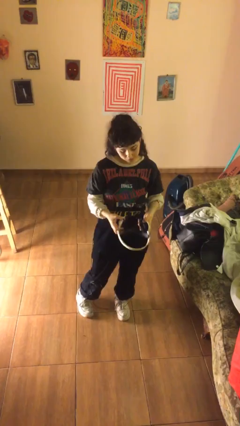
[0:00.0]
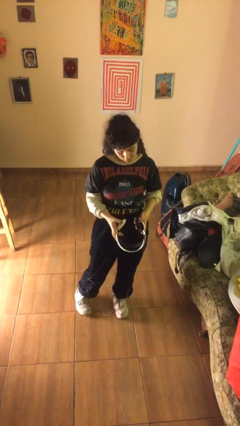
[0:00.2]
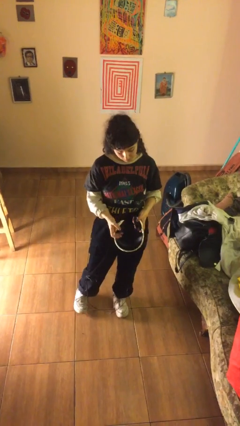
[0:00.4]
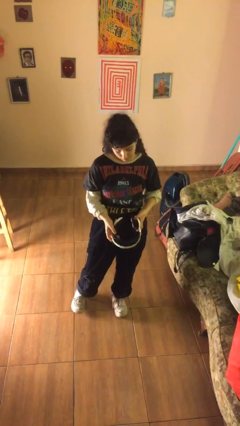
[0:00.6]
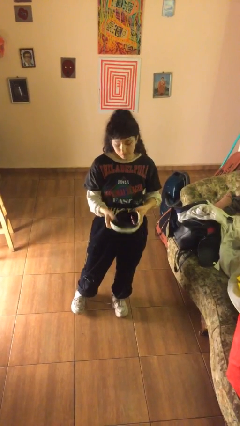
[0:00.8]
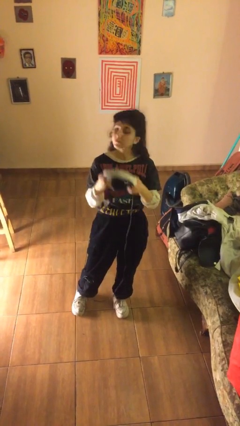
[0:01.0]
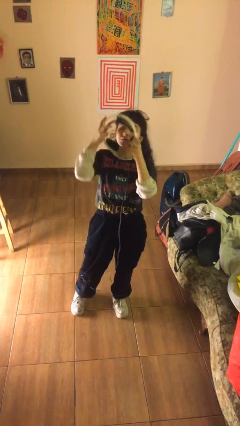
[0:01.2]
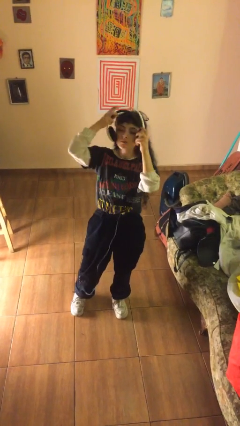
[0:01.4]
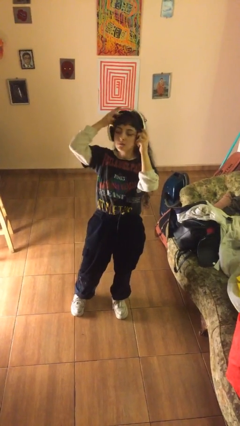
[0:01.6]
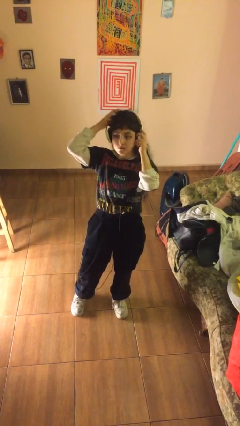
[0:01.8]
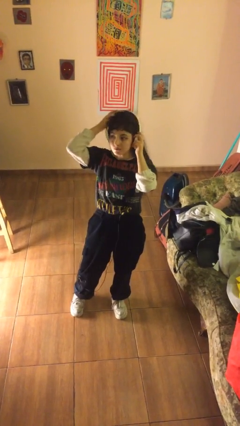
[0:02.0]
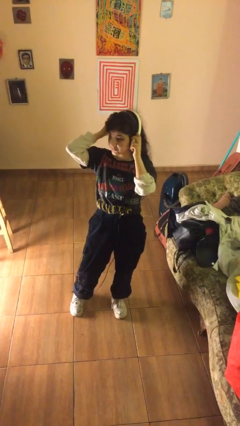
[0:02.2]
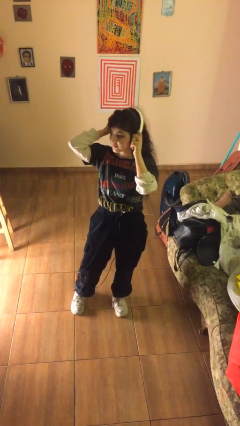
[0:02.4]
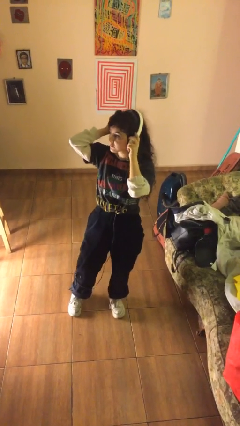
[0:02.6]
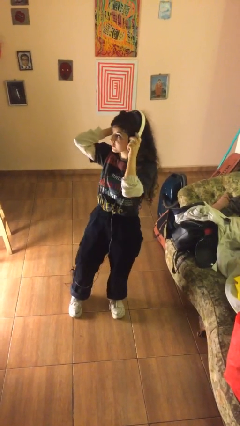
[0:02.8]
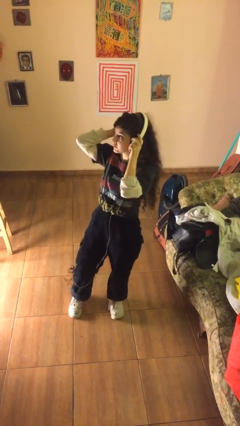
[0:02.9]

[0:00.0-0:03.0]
person puts on headphones

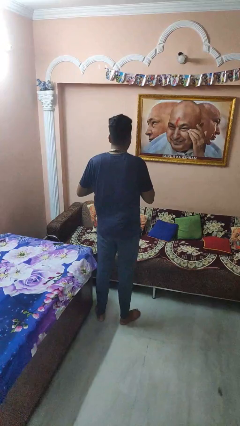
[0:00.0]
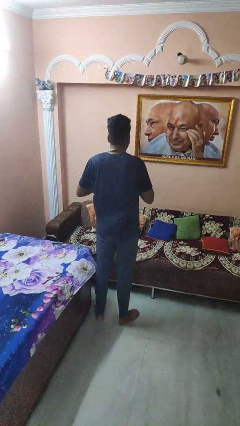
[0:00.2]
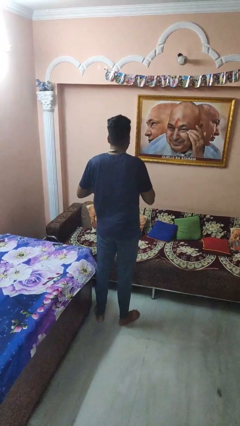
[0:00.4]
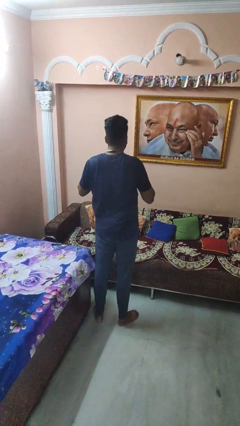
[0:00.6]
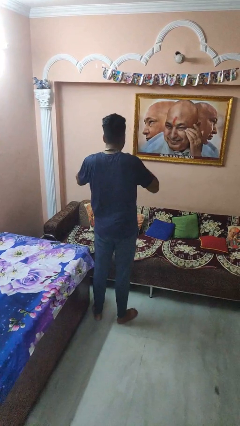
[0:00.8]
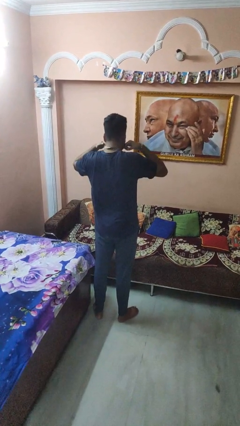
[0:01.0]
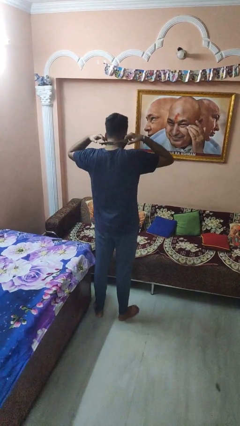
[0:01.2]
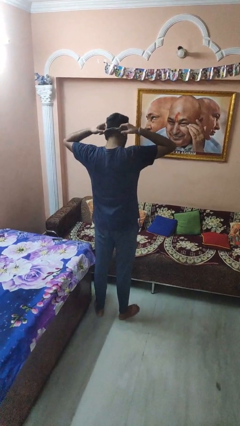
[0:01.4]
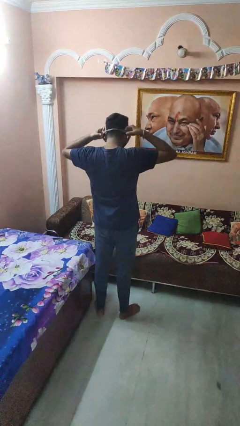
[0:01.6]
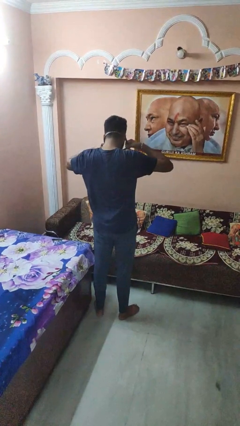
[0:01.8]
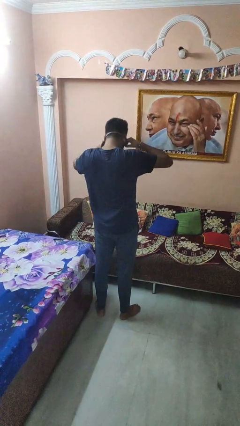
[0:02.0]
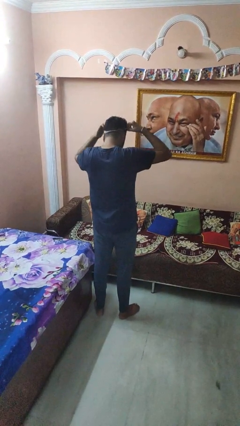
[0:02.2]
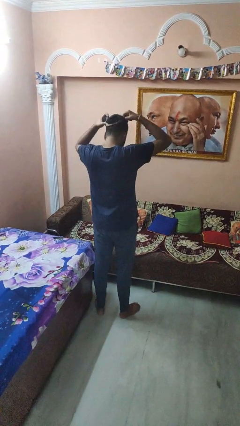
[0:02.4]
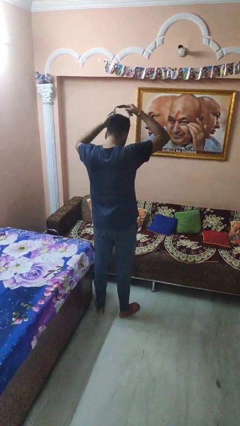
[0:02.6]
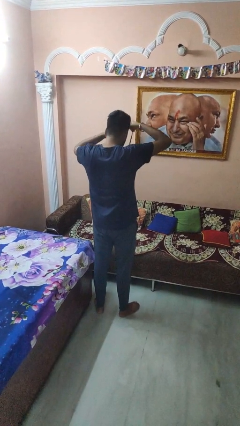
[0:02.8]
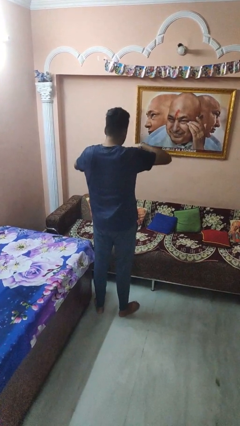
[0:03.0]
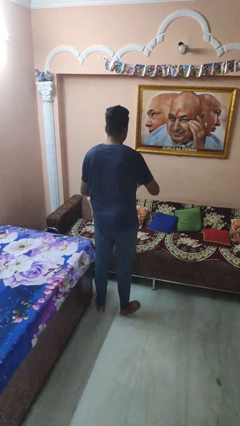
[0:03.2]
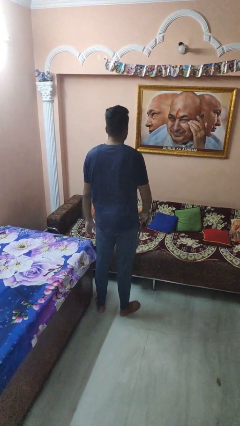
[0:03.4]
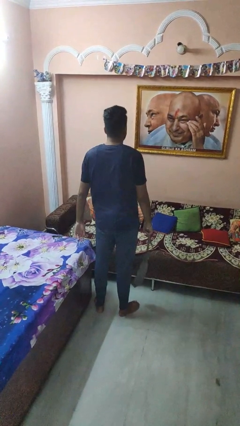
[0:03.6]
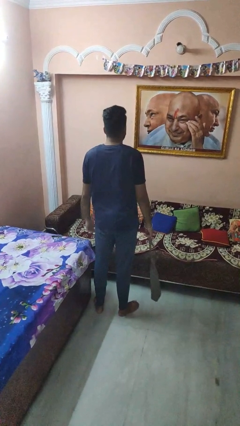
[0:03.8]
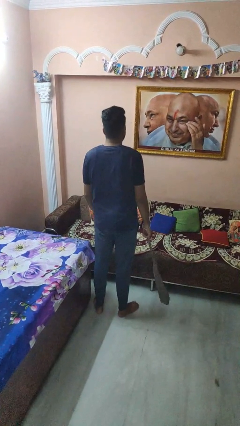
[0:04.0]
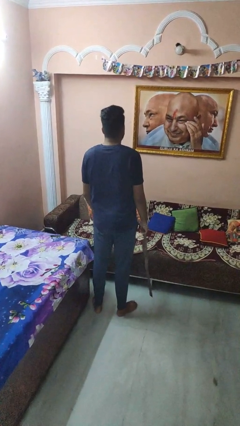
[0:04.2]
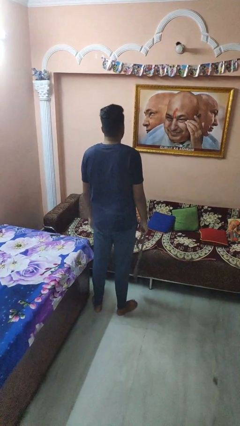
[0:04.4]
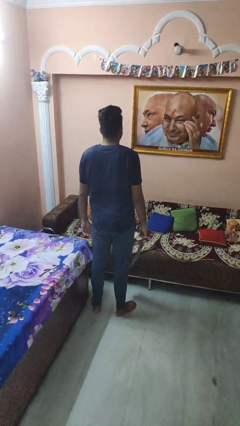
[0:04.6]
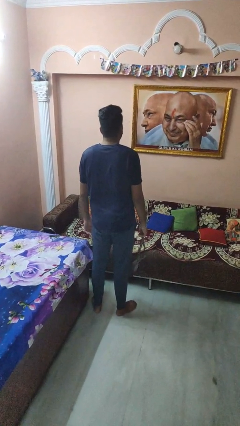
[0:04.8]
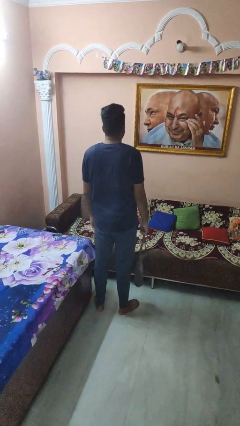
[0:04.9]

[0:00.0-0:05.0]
person takes off necktie

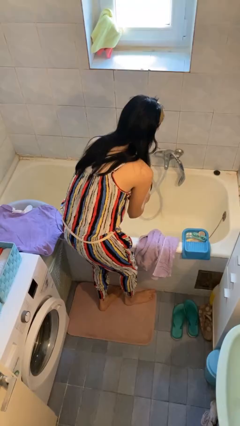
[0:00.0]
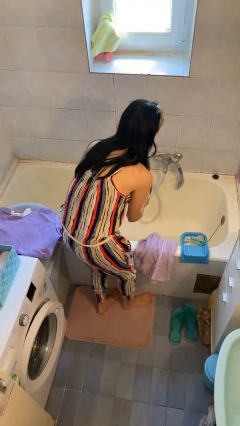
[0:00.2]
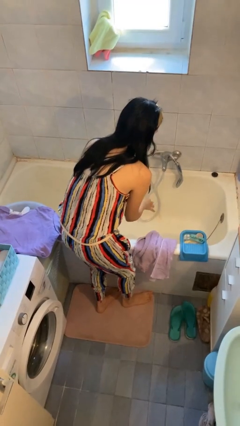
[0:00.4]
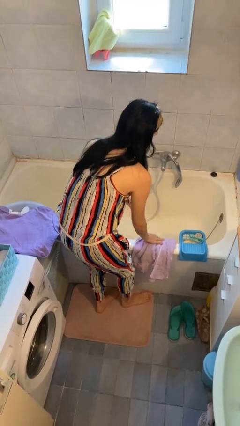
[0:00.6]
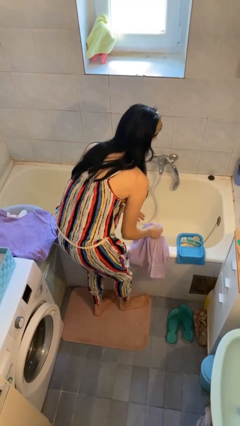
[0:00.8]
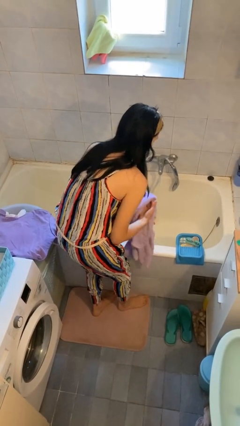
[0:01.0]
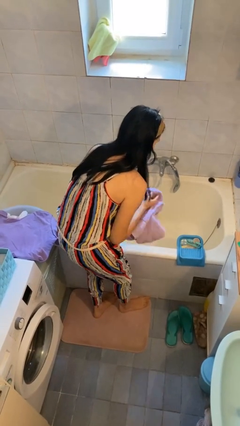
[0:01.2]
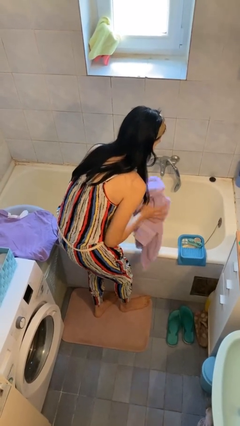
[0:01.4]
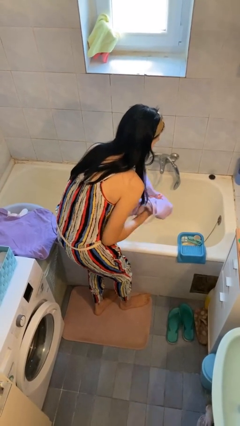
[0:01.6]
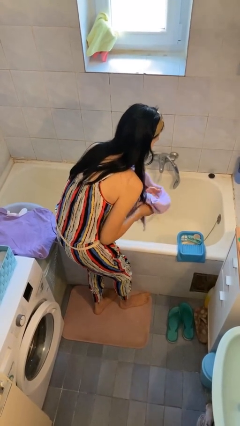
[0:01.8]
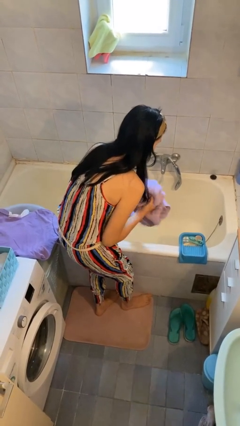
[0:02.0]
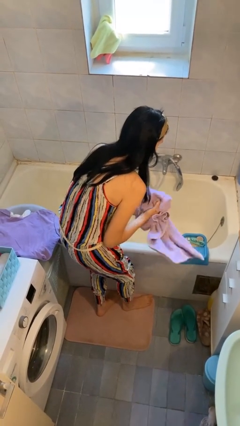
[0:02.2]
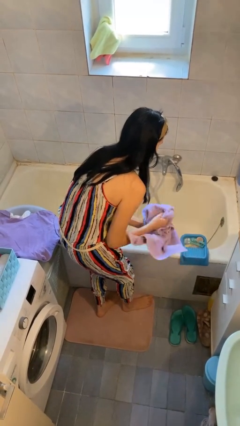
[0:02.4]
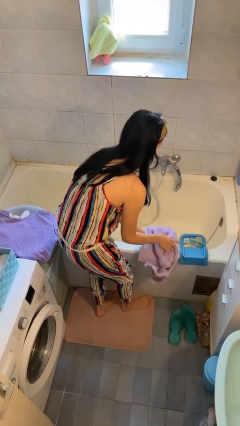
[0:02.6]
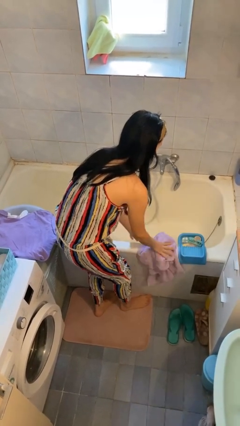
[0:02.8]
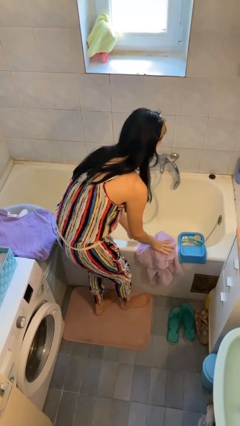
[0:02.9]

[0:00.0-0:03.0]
person dries hands with towel

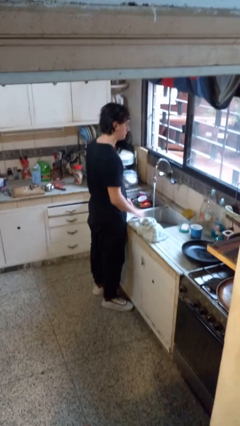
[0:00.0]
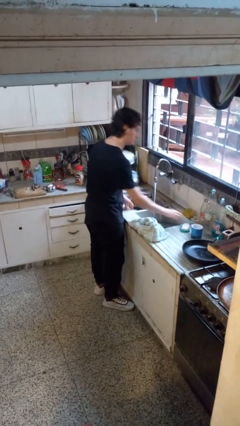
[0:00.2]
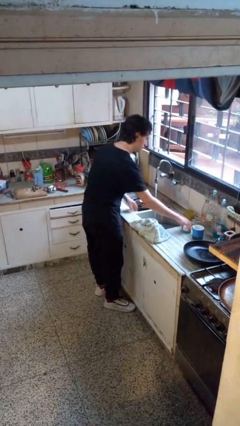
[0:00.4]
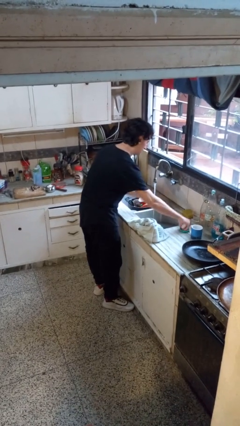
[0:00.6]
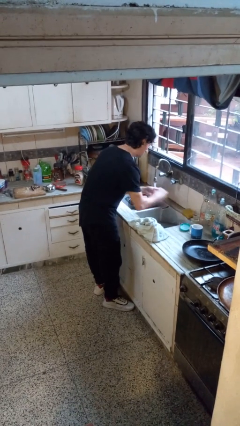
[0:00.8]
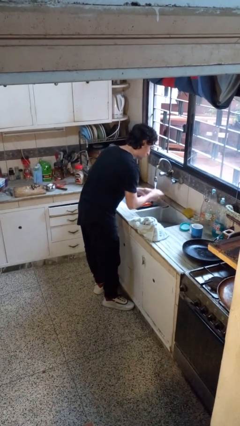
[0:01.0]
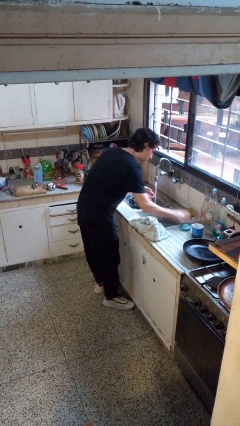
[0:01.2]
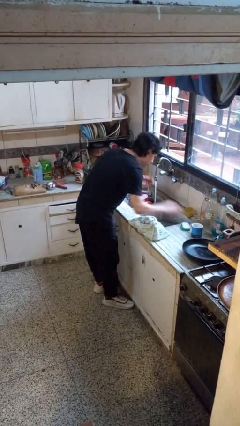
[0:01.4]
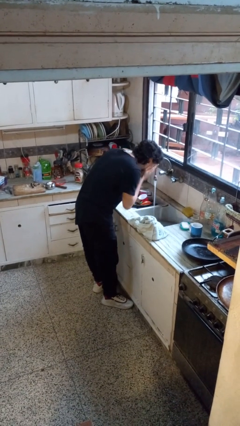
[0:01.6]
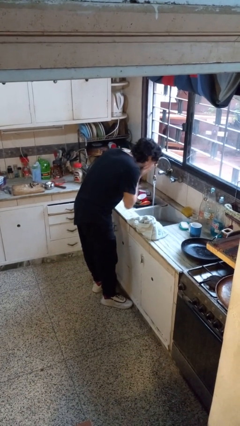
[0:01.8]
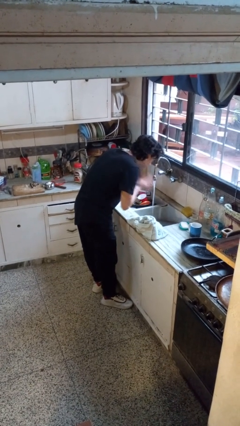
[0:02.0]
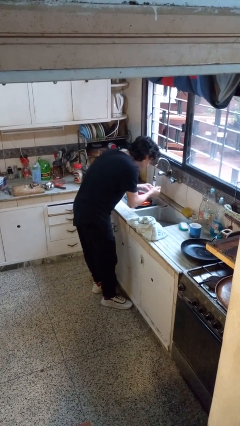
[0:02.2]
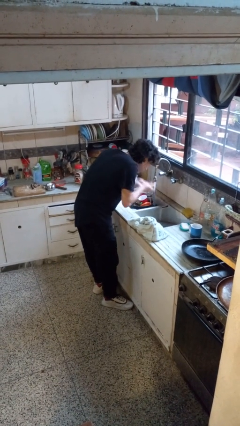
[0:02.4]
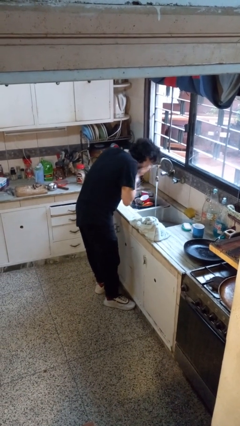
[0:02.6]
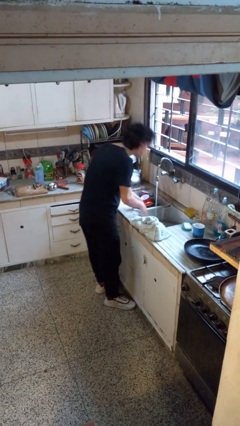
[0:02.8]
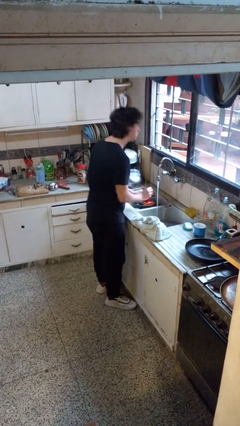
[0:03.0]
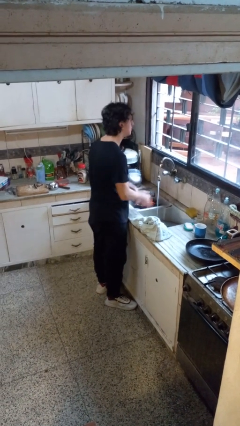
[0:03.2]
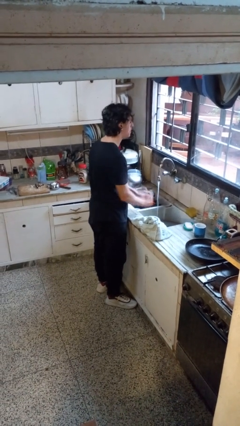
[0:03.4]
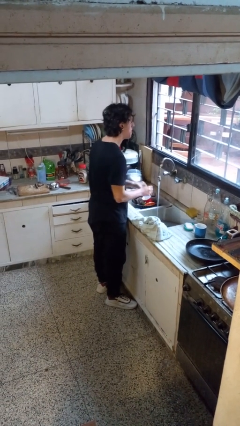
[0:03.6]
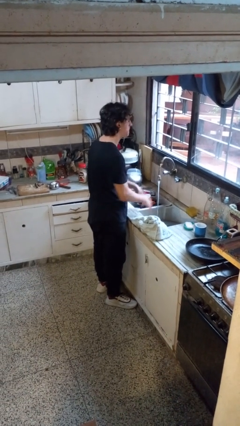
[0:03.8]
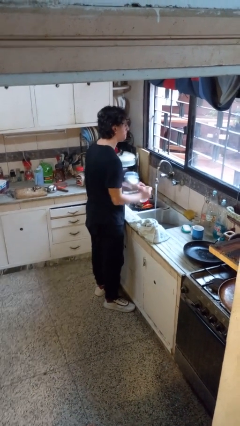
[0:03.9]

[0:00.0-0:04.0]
person washes face

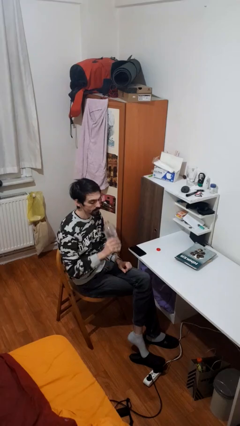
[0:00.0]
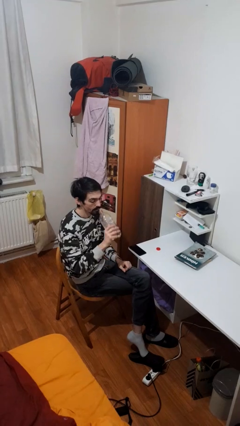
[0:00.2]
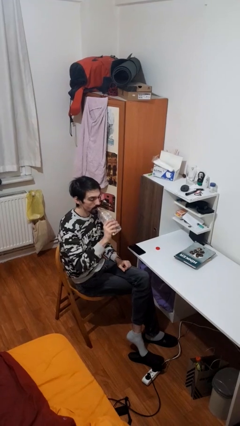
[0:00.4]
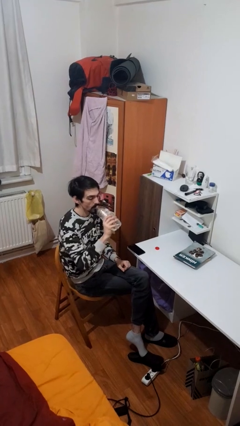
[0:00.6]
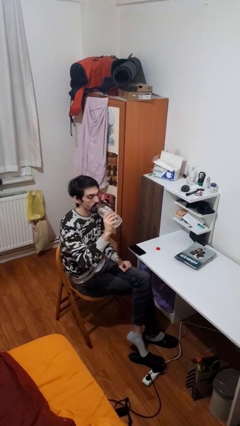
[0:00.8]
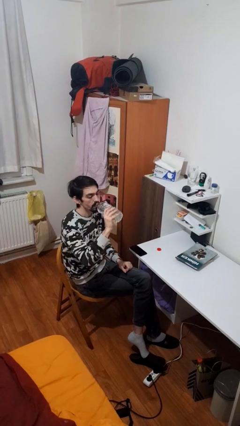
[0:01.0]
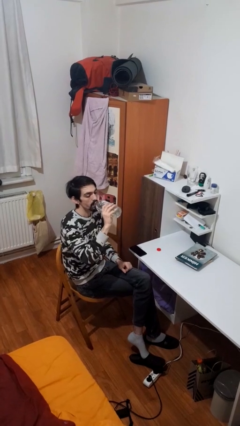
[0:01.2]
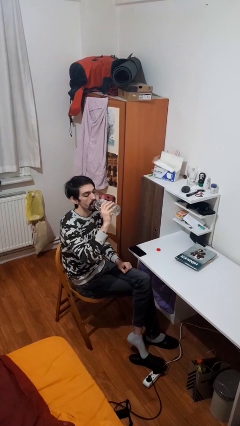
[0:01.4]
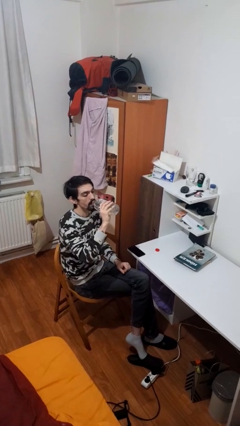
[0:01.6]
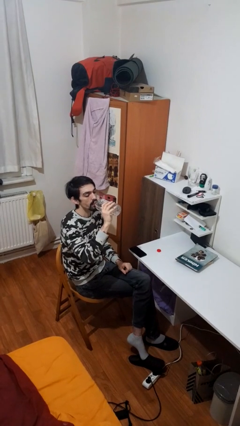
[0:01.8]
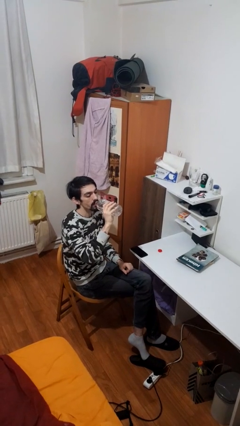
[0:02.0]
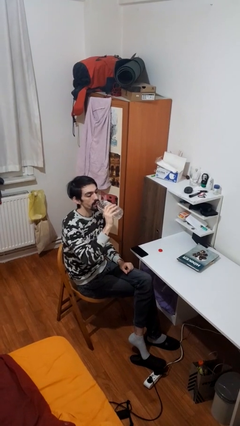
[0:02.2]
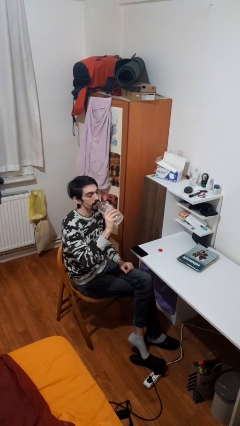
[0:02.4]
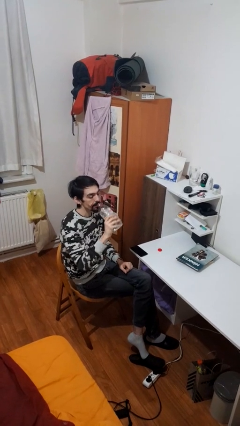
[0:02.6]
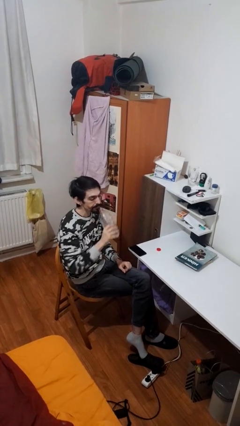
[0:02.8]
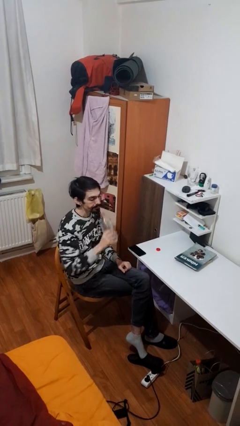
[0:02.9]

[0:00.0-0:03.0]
person drinks from bottle
